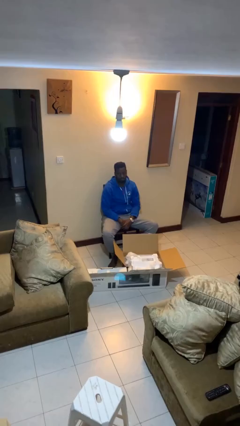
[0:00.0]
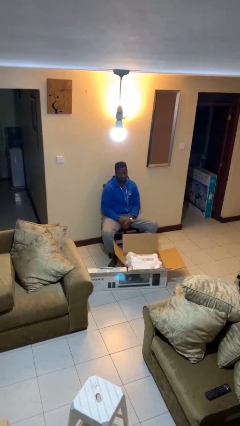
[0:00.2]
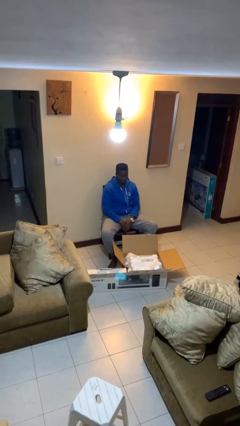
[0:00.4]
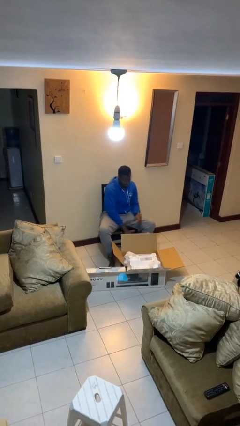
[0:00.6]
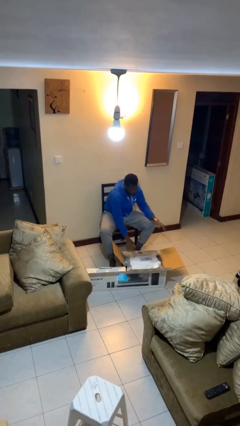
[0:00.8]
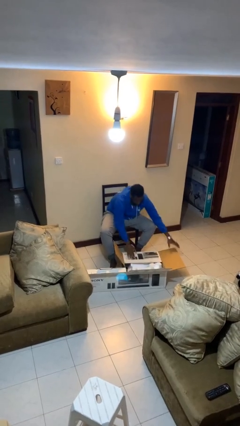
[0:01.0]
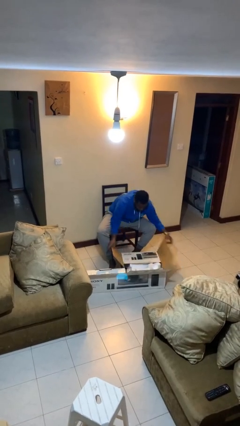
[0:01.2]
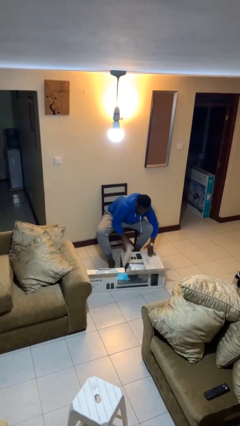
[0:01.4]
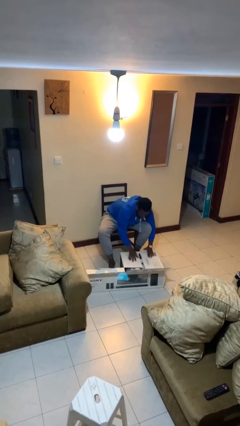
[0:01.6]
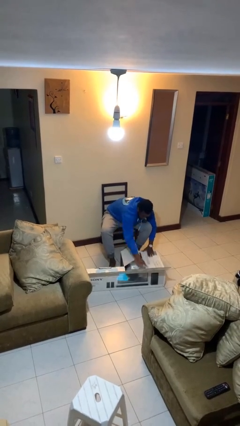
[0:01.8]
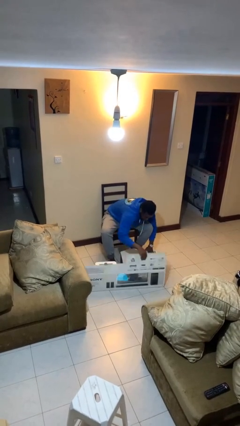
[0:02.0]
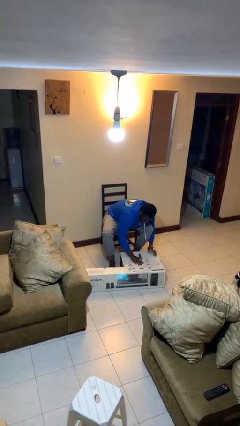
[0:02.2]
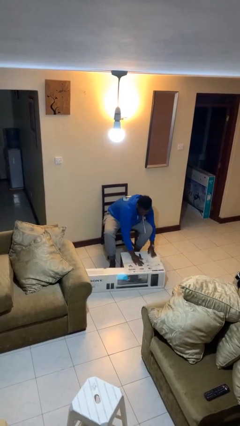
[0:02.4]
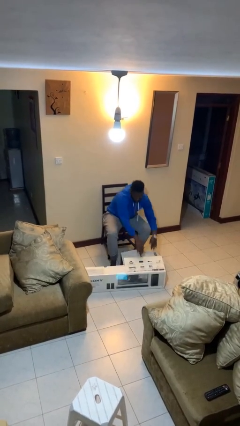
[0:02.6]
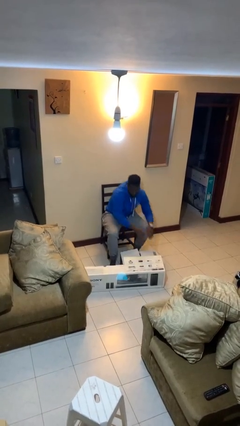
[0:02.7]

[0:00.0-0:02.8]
person closes box

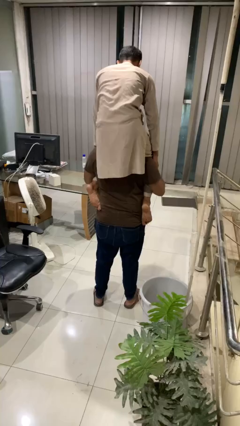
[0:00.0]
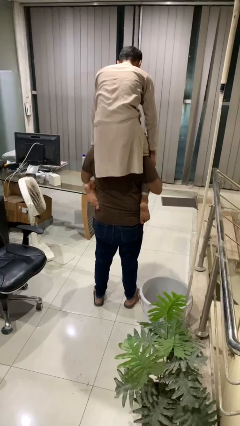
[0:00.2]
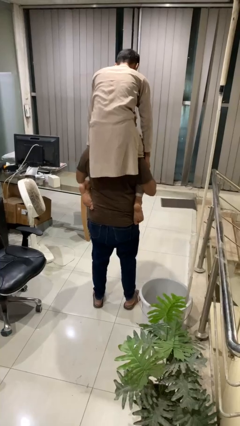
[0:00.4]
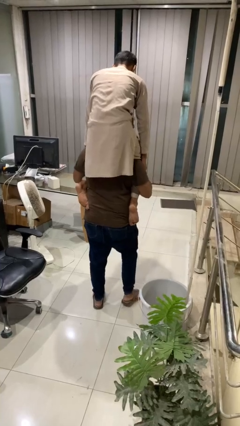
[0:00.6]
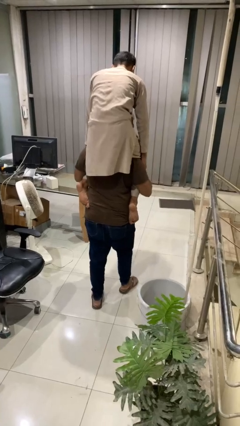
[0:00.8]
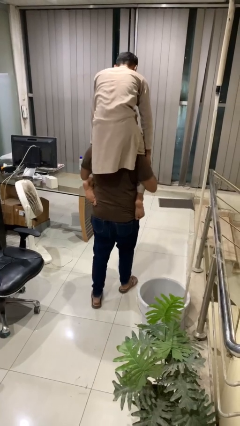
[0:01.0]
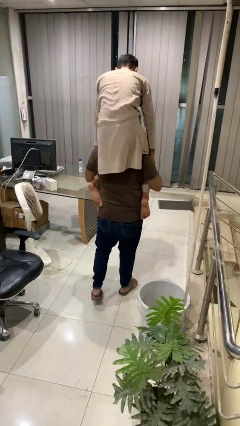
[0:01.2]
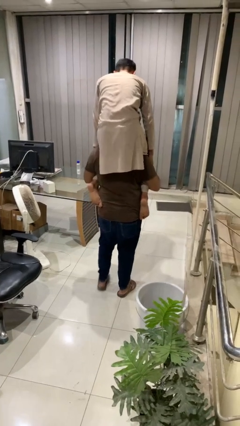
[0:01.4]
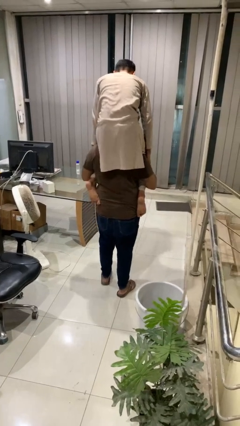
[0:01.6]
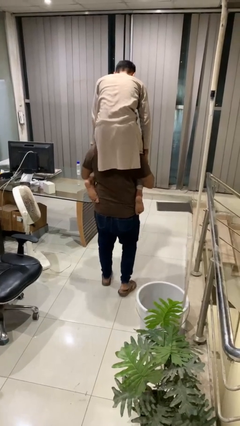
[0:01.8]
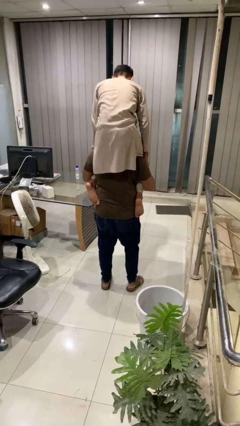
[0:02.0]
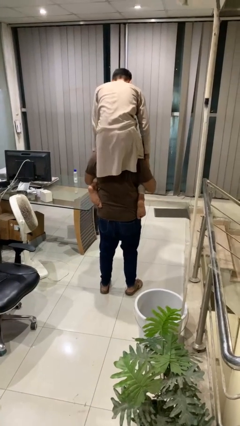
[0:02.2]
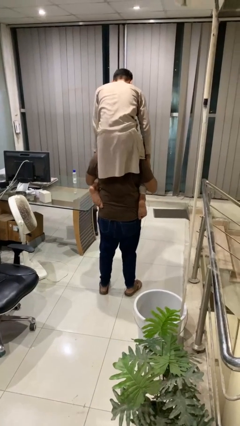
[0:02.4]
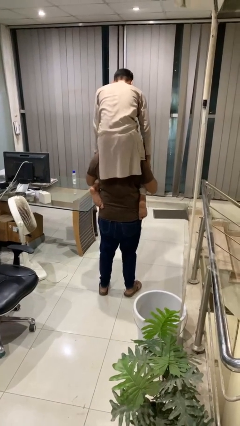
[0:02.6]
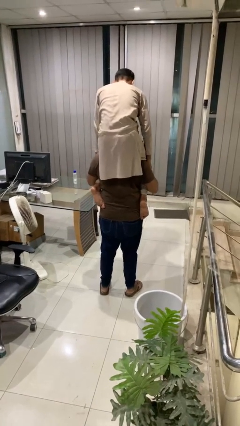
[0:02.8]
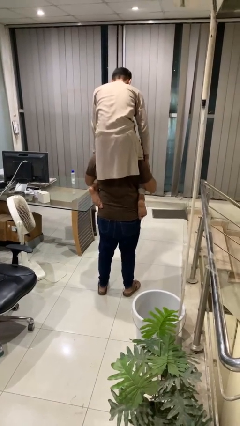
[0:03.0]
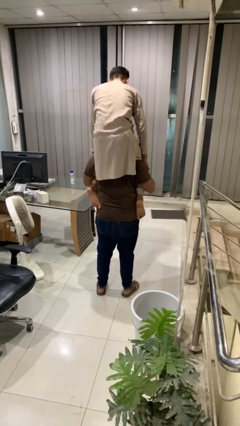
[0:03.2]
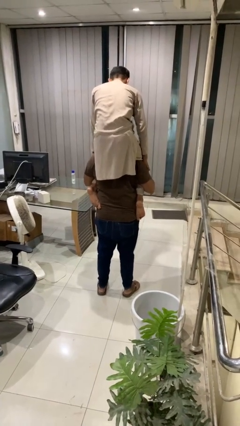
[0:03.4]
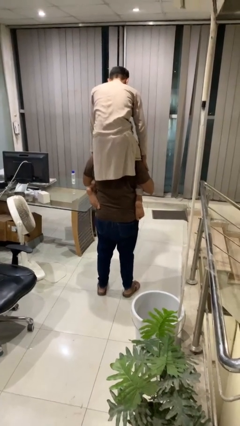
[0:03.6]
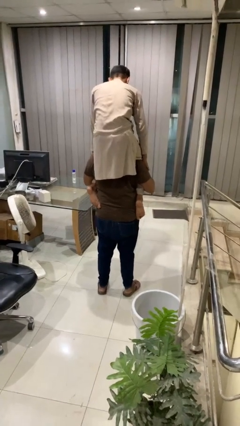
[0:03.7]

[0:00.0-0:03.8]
person carries person on shoulders

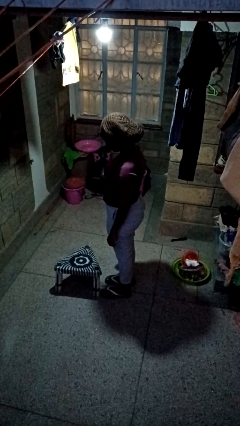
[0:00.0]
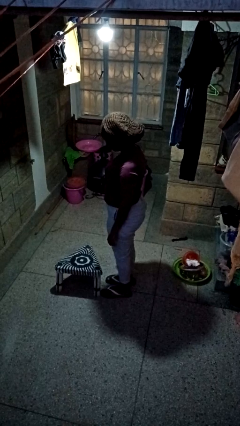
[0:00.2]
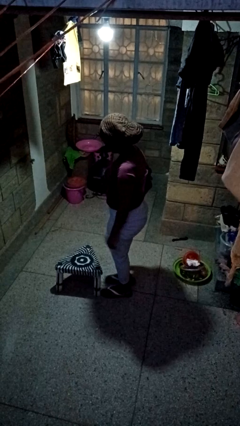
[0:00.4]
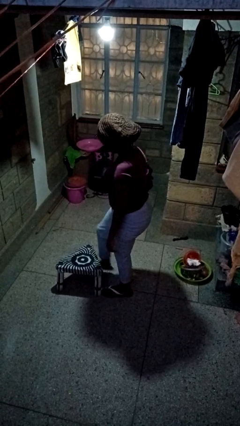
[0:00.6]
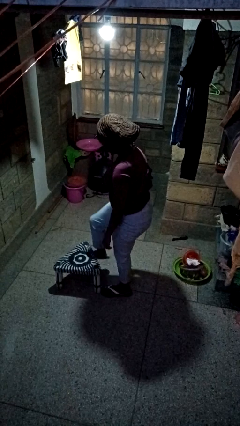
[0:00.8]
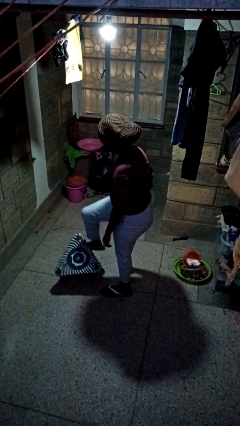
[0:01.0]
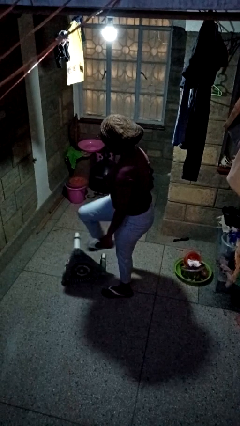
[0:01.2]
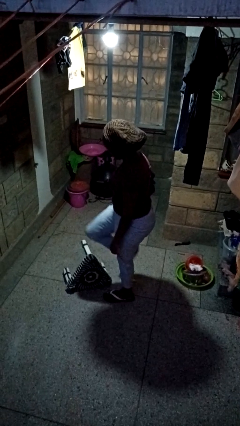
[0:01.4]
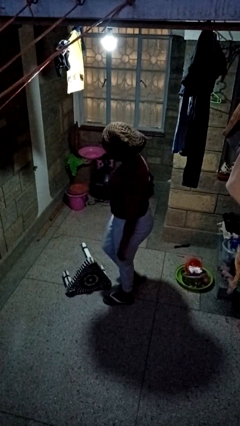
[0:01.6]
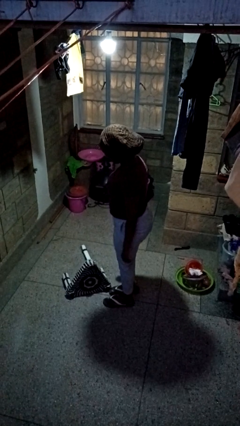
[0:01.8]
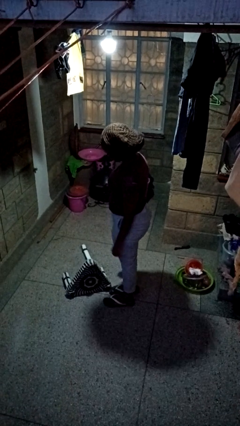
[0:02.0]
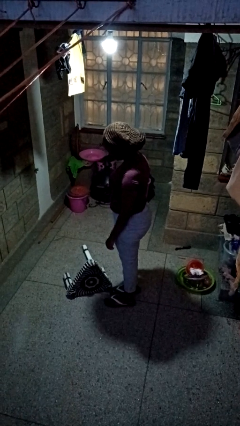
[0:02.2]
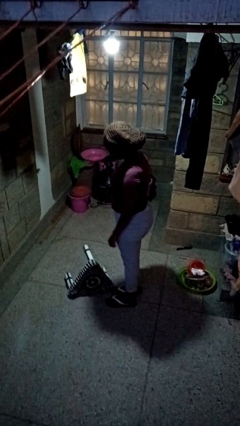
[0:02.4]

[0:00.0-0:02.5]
person knocks over furniture

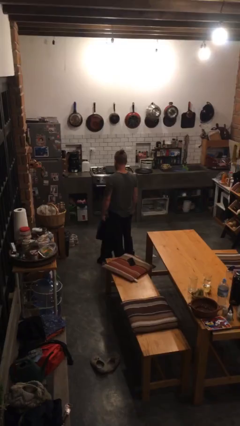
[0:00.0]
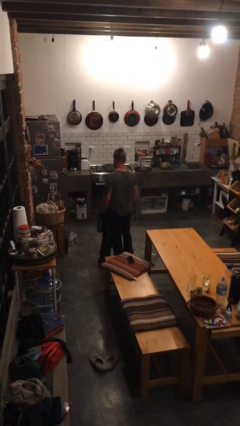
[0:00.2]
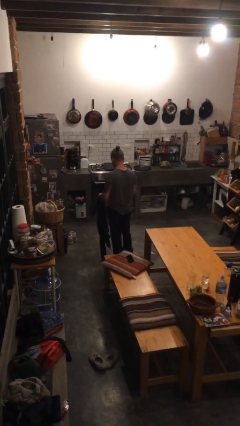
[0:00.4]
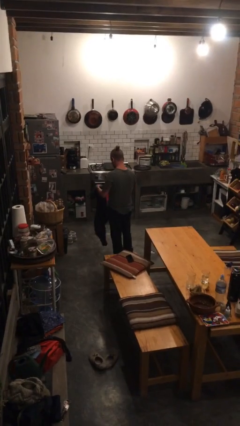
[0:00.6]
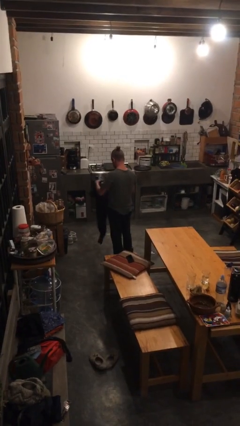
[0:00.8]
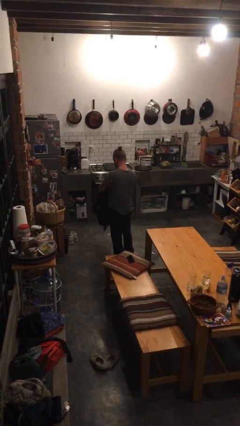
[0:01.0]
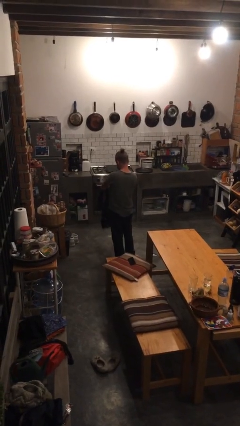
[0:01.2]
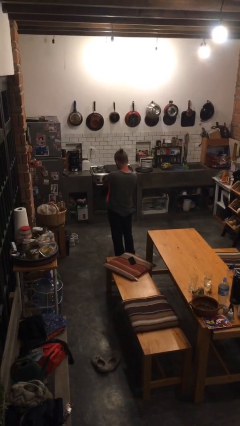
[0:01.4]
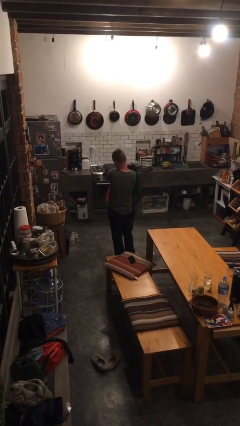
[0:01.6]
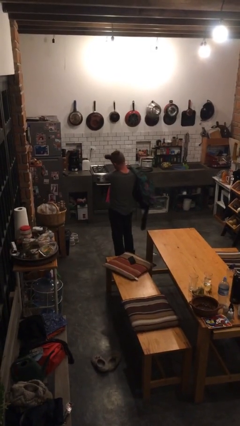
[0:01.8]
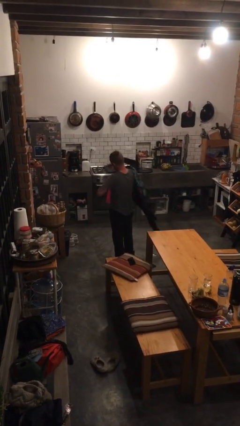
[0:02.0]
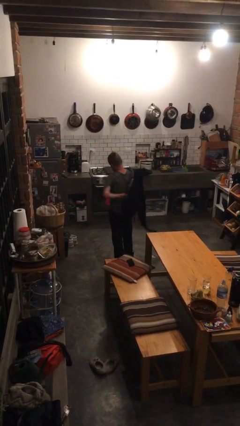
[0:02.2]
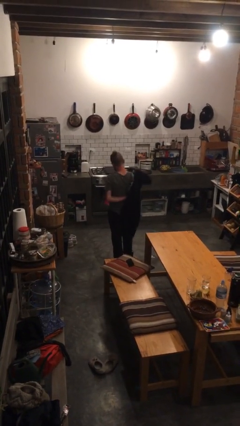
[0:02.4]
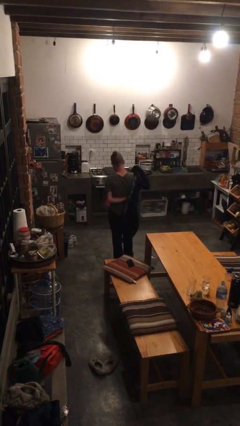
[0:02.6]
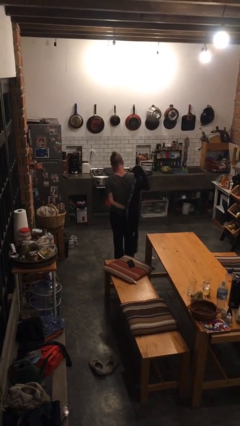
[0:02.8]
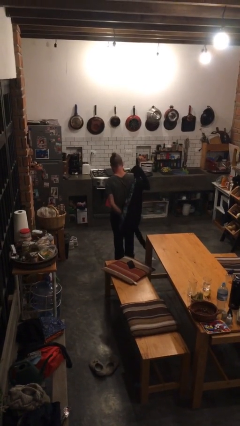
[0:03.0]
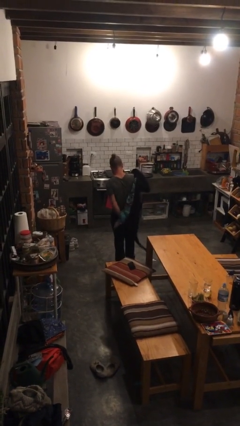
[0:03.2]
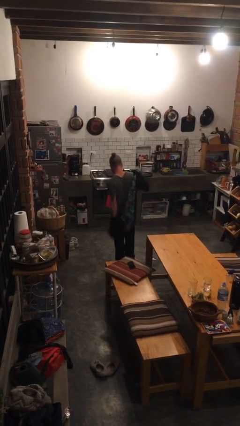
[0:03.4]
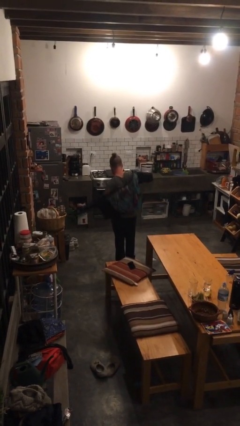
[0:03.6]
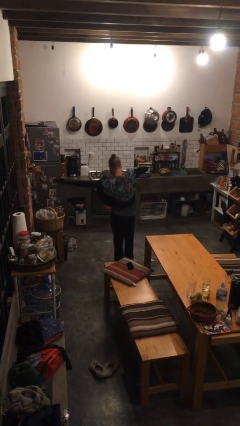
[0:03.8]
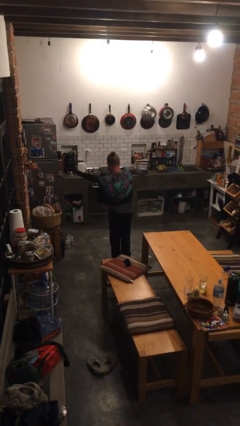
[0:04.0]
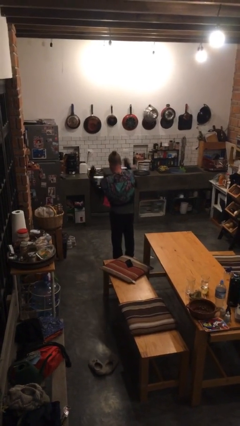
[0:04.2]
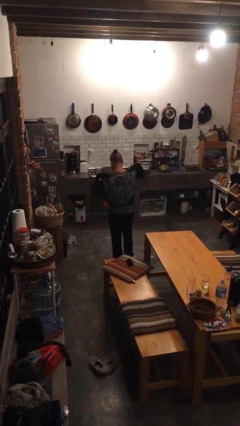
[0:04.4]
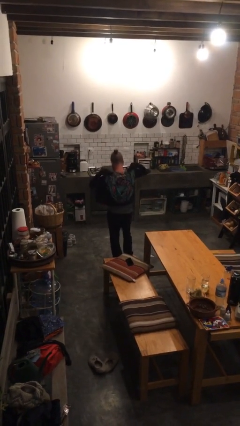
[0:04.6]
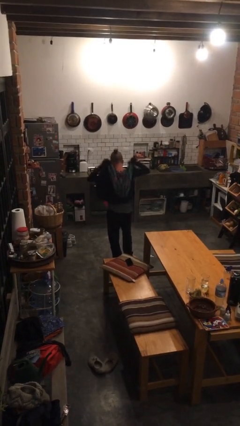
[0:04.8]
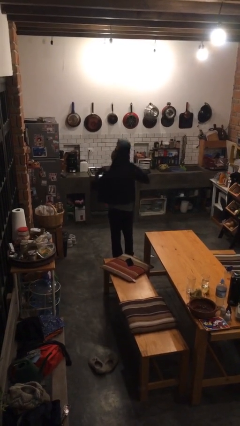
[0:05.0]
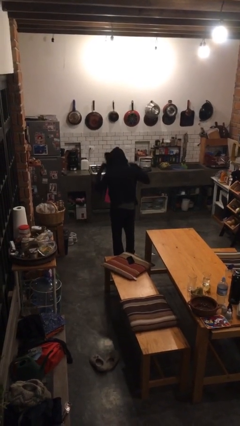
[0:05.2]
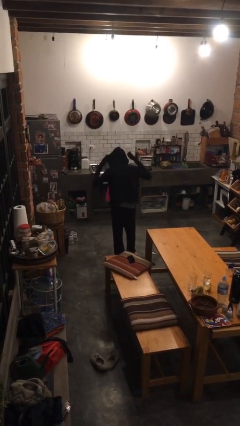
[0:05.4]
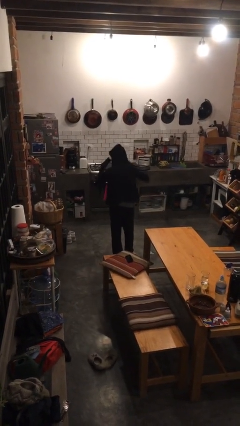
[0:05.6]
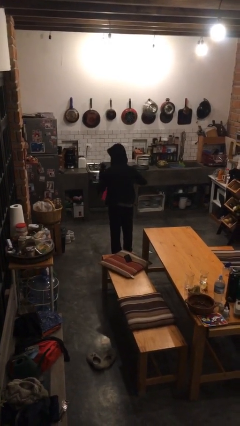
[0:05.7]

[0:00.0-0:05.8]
person puts on hoodie

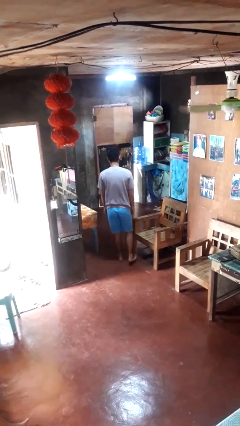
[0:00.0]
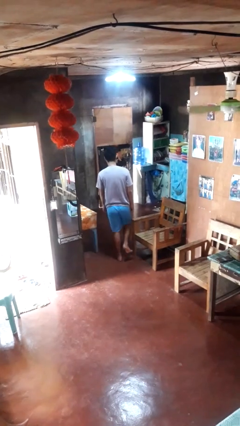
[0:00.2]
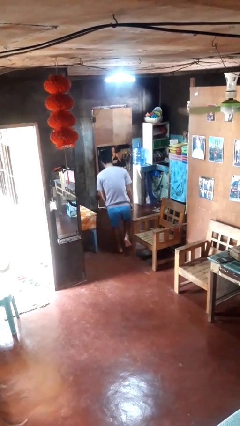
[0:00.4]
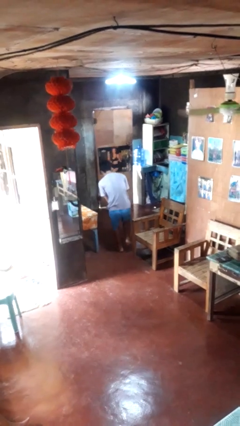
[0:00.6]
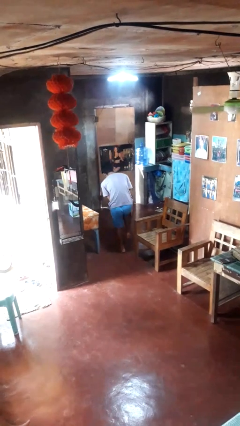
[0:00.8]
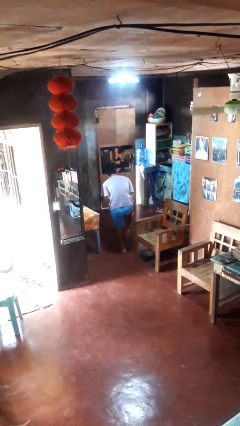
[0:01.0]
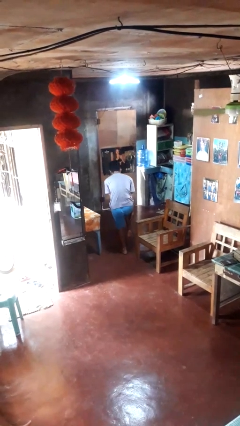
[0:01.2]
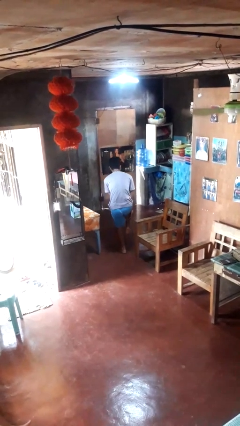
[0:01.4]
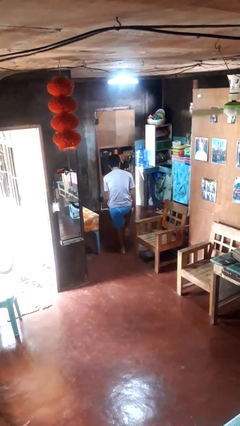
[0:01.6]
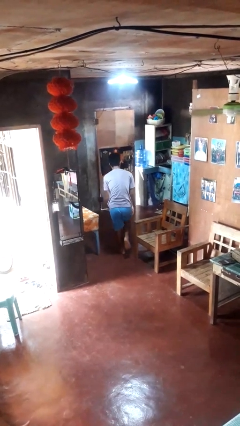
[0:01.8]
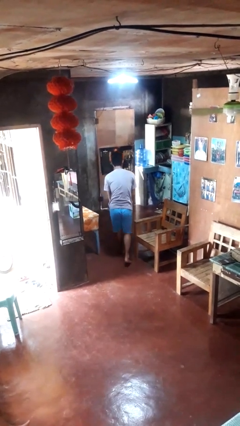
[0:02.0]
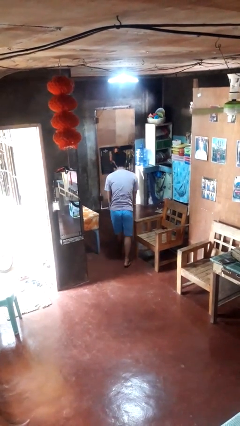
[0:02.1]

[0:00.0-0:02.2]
person stubs toe

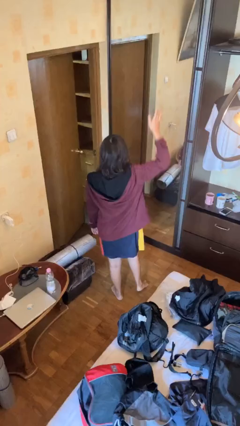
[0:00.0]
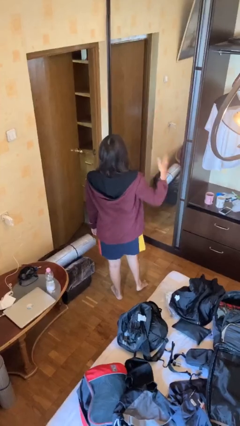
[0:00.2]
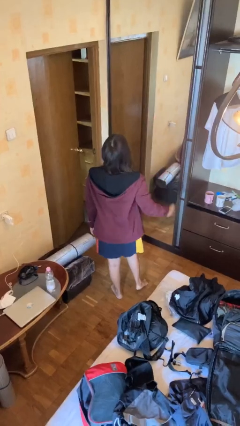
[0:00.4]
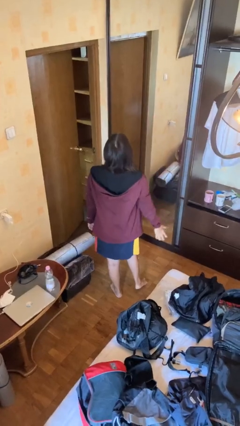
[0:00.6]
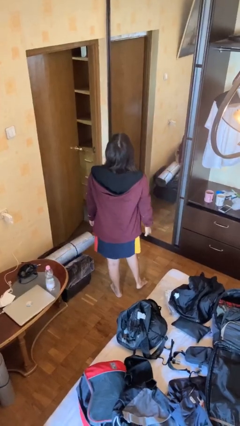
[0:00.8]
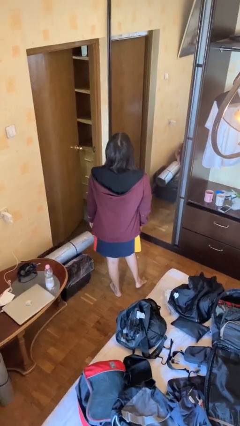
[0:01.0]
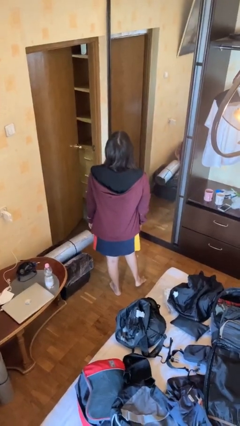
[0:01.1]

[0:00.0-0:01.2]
person gestures swipe down
